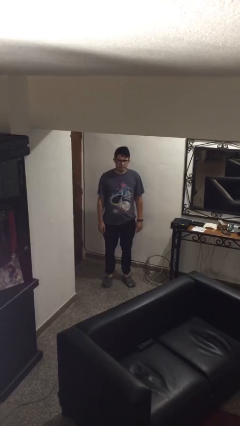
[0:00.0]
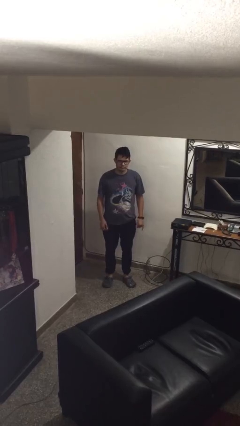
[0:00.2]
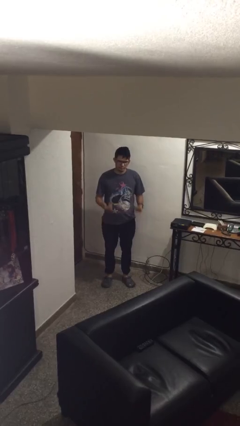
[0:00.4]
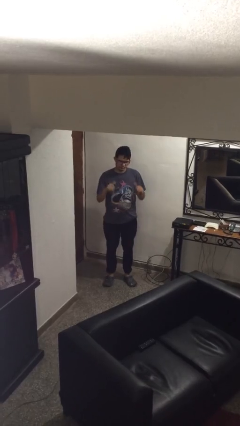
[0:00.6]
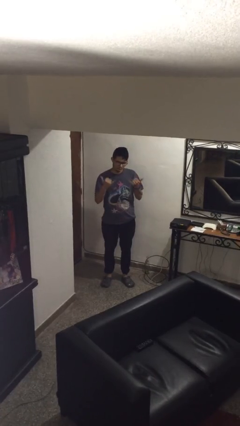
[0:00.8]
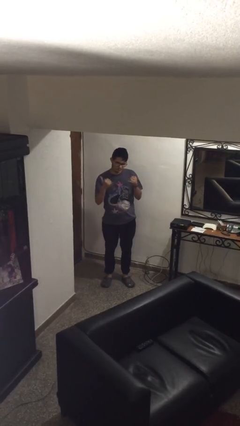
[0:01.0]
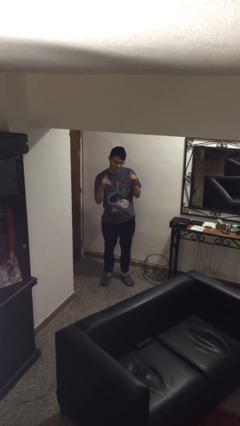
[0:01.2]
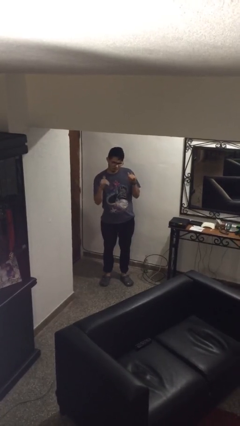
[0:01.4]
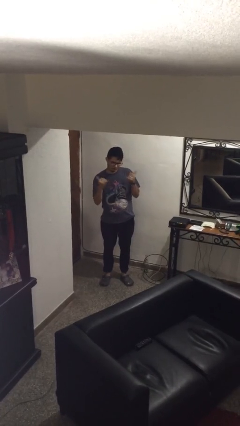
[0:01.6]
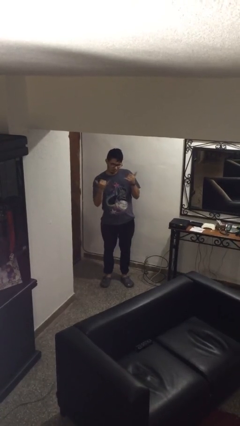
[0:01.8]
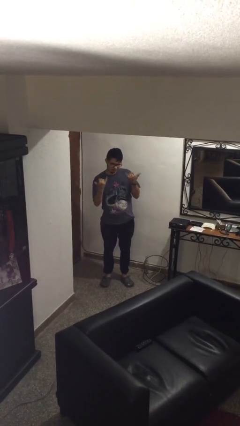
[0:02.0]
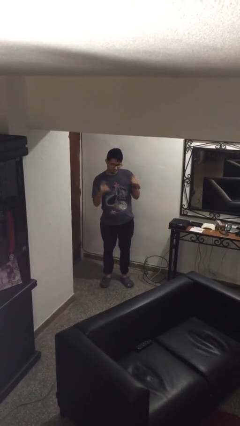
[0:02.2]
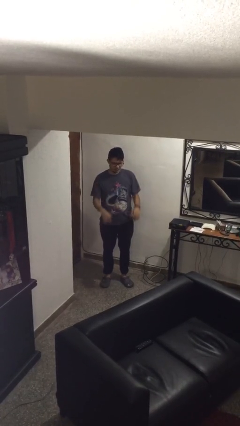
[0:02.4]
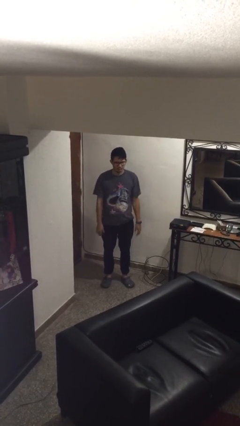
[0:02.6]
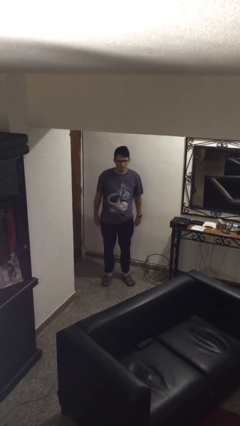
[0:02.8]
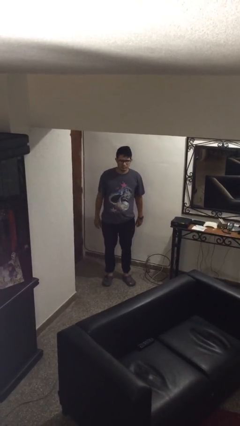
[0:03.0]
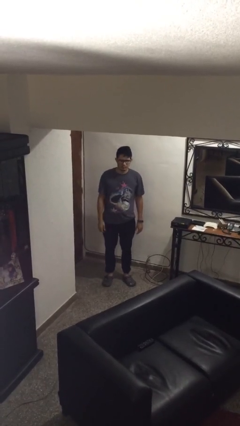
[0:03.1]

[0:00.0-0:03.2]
person gestures hang loose

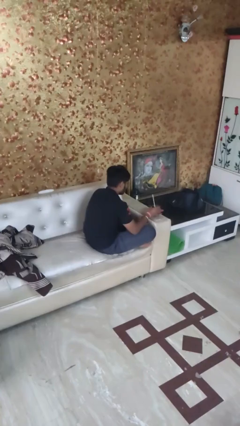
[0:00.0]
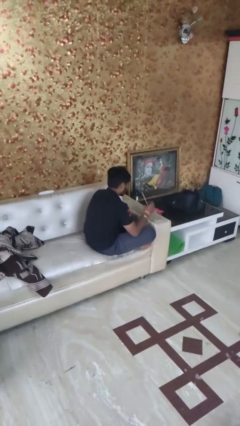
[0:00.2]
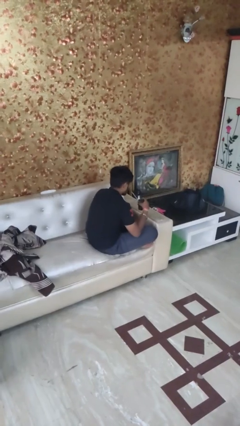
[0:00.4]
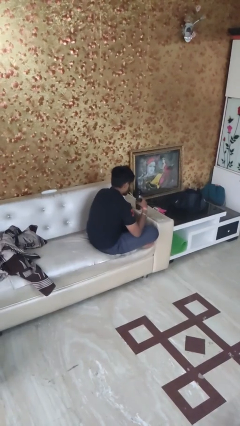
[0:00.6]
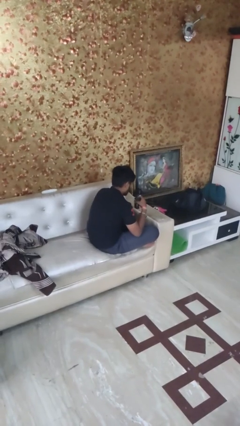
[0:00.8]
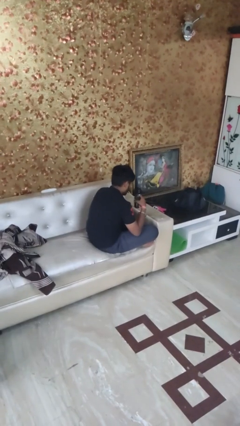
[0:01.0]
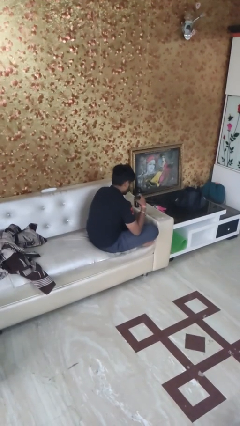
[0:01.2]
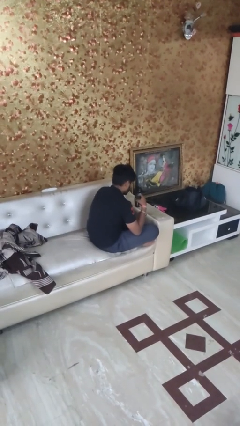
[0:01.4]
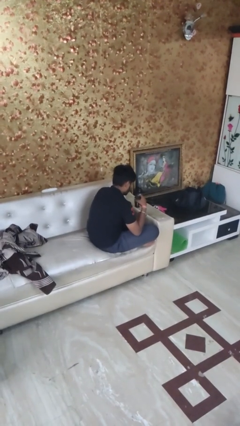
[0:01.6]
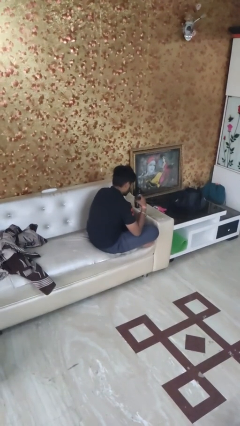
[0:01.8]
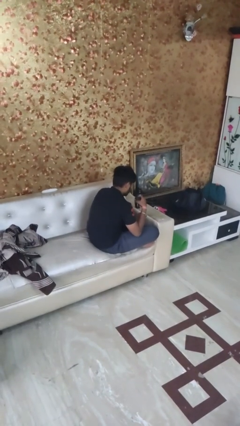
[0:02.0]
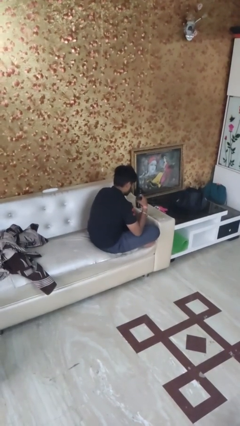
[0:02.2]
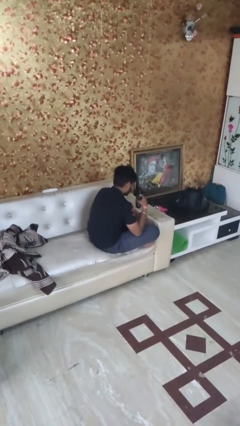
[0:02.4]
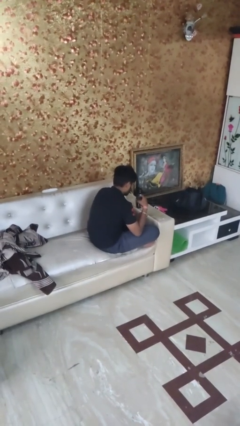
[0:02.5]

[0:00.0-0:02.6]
person drinks from straw

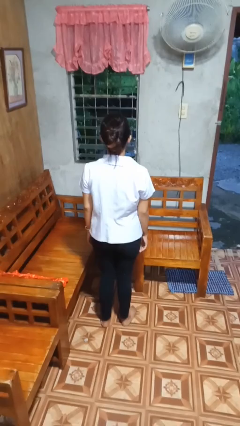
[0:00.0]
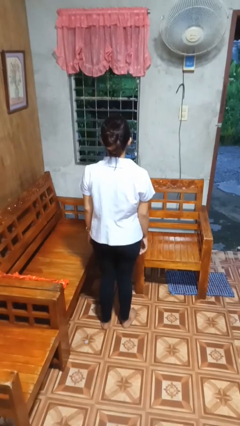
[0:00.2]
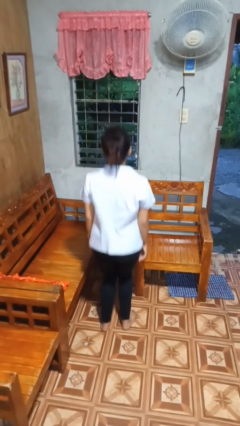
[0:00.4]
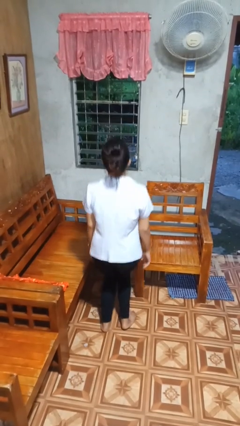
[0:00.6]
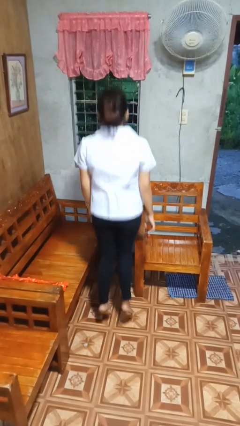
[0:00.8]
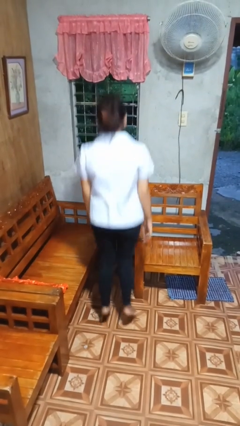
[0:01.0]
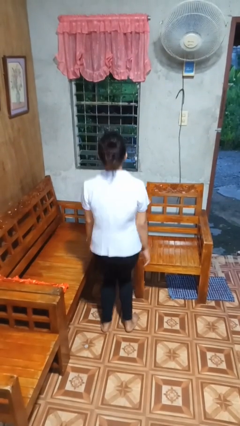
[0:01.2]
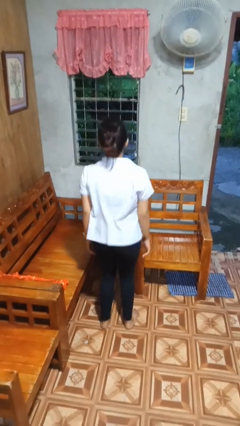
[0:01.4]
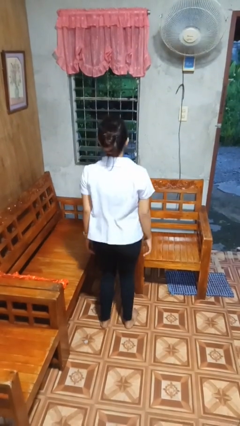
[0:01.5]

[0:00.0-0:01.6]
person jumps

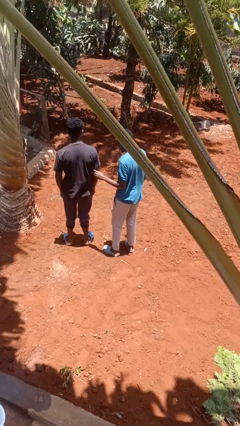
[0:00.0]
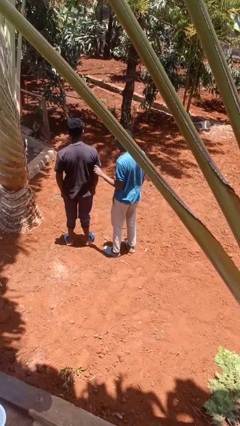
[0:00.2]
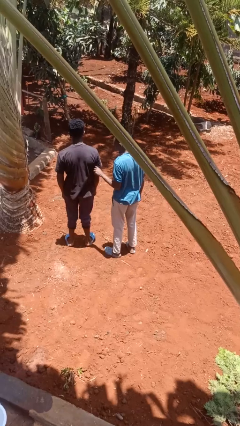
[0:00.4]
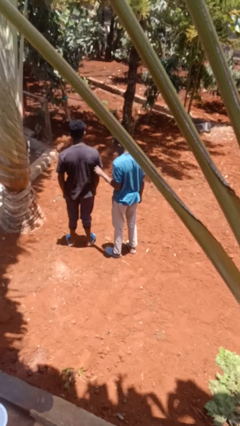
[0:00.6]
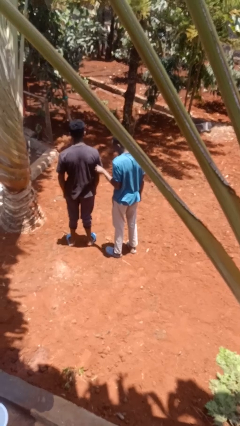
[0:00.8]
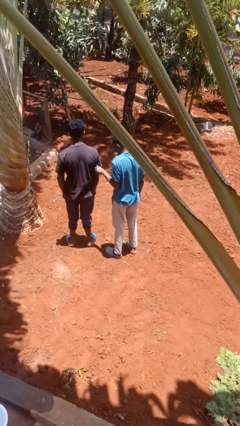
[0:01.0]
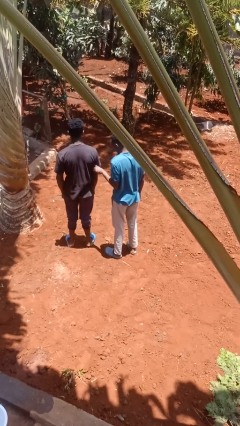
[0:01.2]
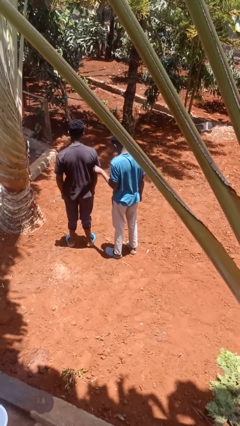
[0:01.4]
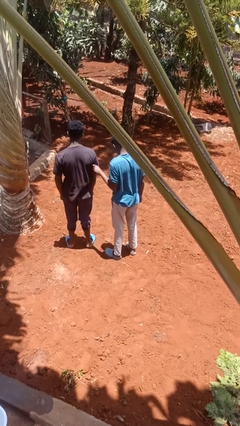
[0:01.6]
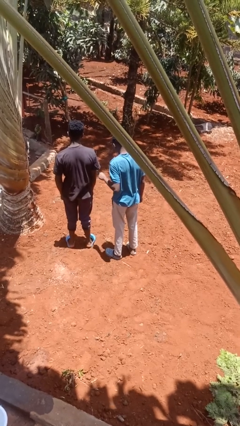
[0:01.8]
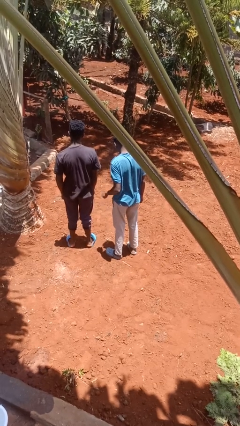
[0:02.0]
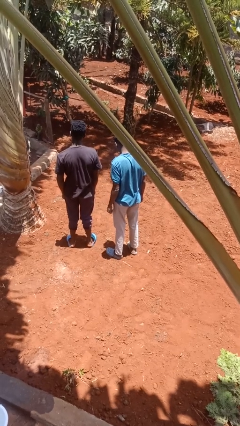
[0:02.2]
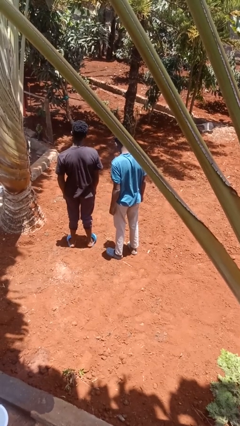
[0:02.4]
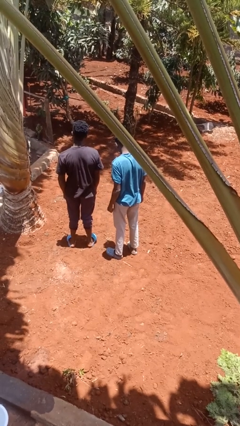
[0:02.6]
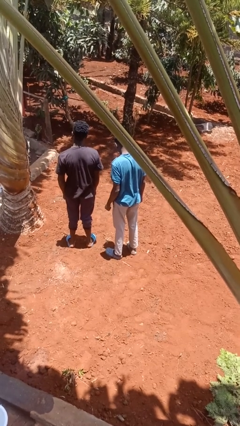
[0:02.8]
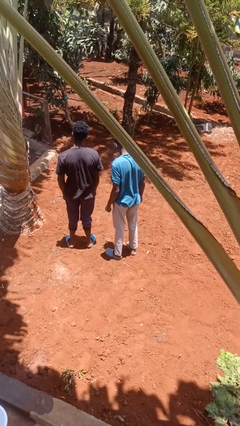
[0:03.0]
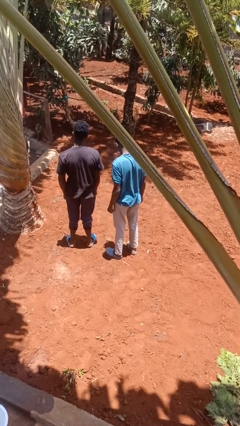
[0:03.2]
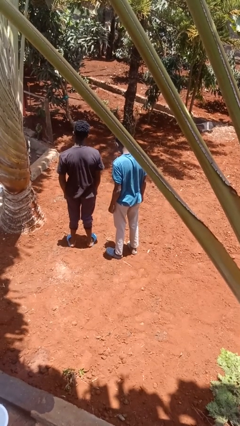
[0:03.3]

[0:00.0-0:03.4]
person tickles person

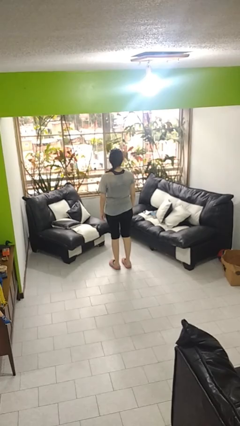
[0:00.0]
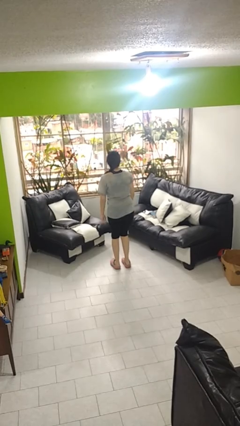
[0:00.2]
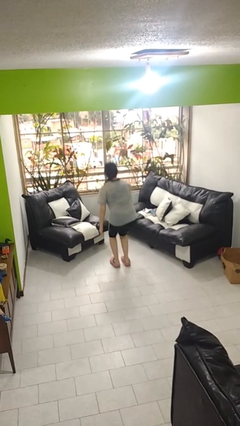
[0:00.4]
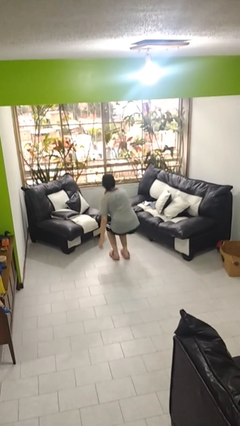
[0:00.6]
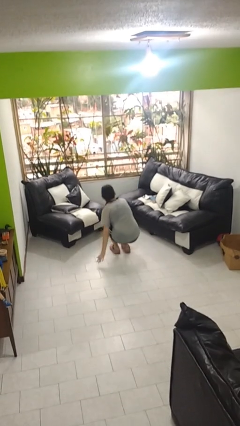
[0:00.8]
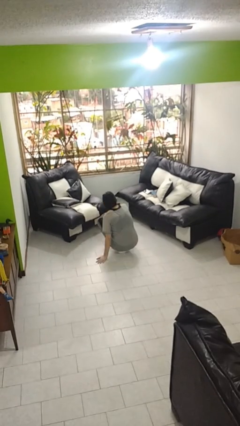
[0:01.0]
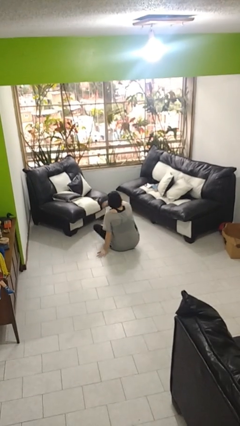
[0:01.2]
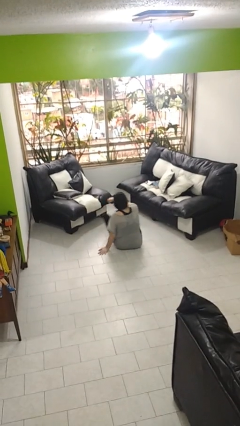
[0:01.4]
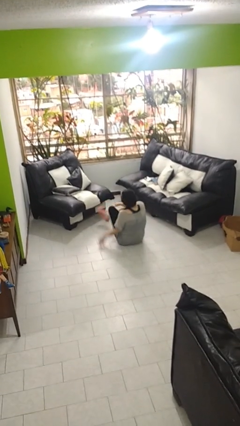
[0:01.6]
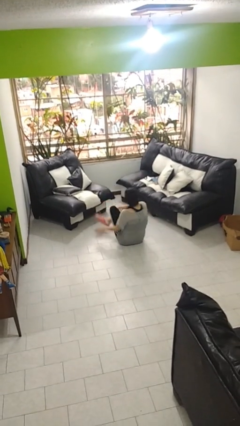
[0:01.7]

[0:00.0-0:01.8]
person sits crisscross

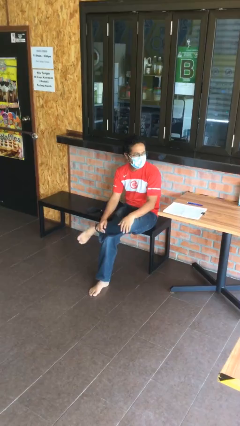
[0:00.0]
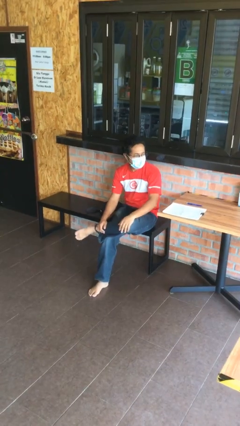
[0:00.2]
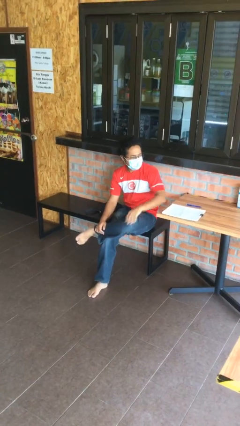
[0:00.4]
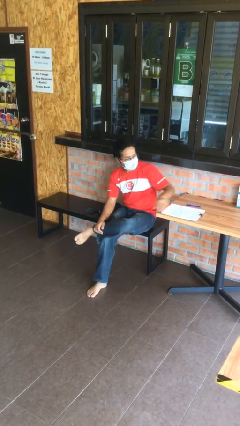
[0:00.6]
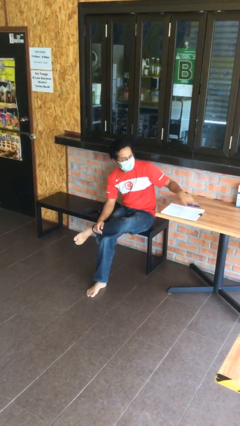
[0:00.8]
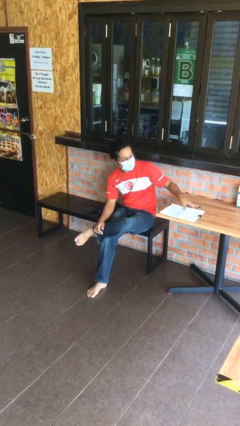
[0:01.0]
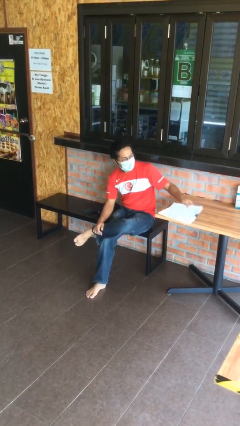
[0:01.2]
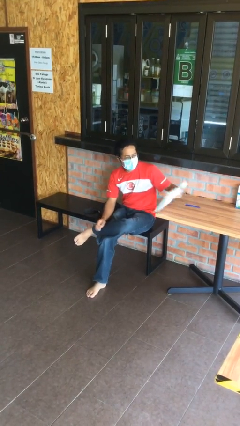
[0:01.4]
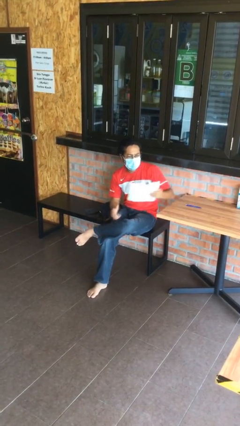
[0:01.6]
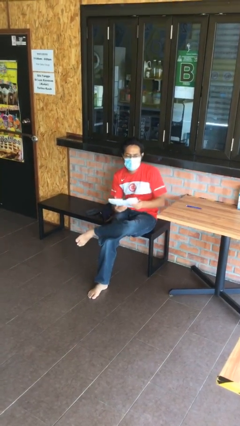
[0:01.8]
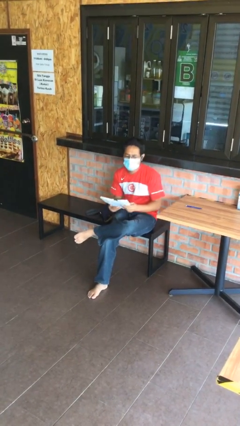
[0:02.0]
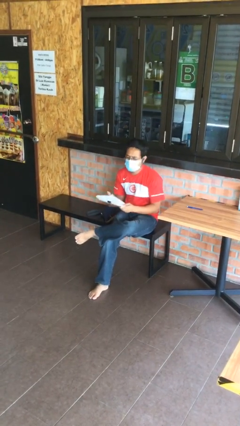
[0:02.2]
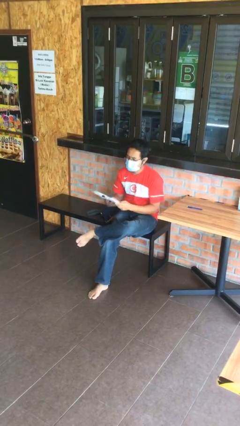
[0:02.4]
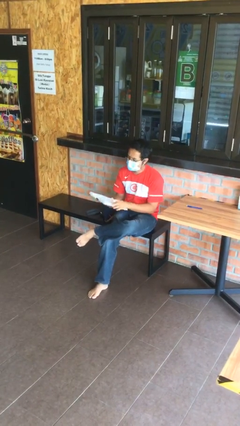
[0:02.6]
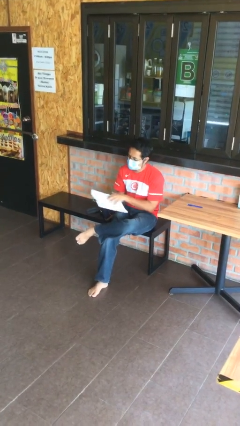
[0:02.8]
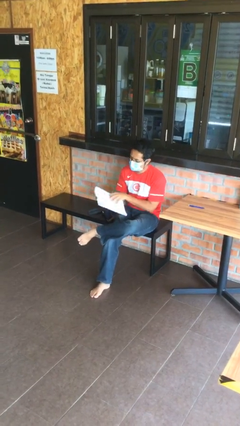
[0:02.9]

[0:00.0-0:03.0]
person picks up object from table

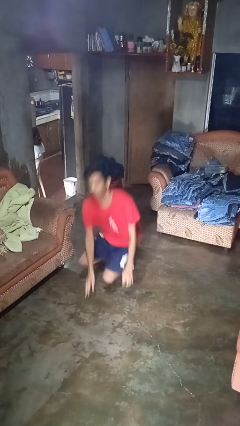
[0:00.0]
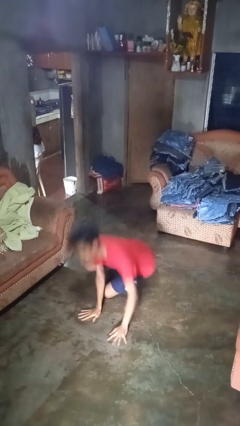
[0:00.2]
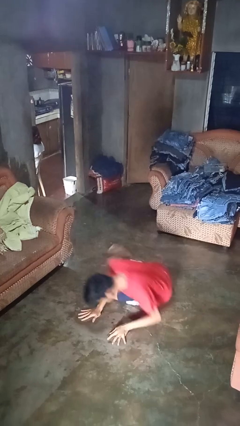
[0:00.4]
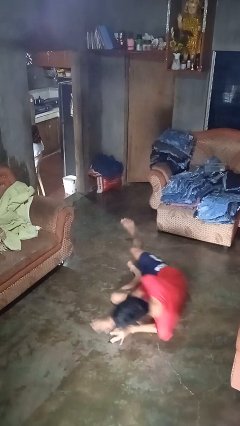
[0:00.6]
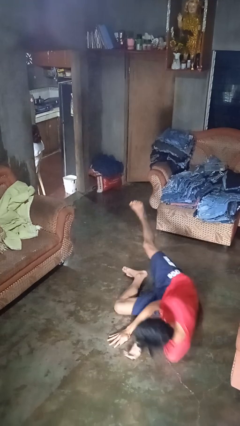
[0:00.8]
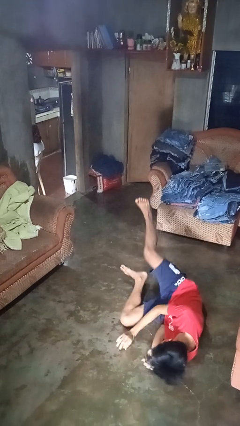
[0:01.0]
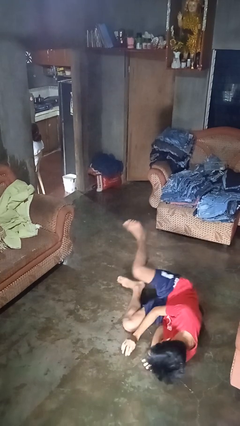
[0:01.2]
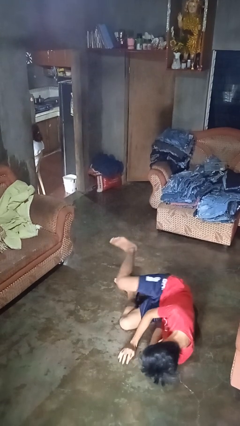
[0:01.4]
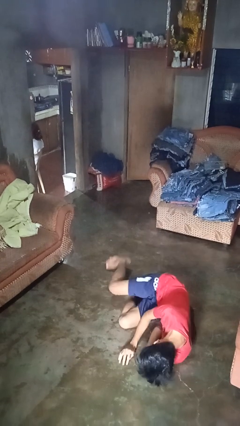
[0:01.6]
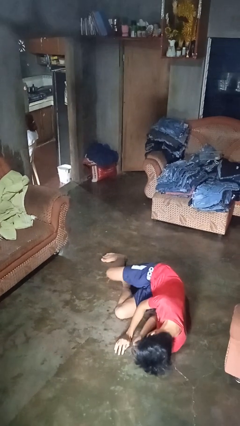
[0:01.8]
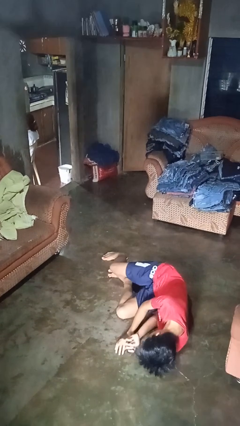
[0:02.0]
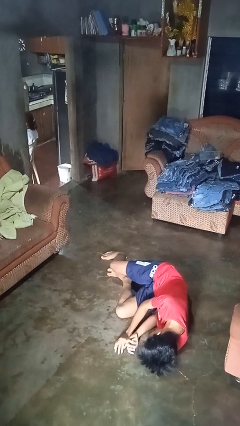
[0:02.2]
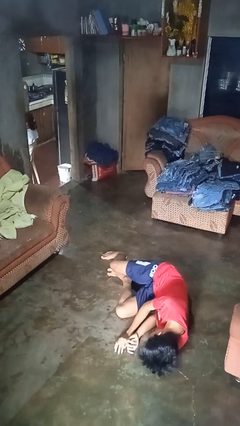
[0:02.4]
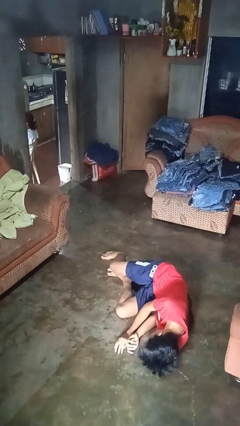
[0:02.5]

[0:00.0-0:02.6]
person falls while standing
